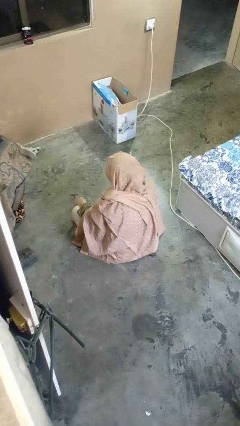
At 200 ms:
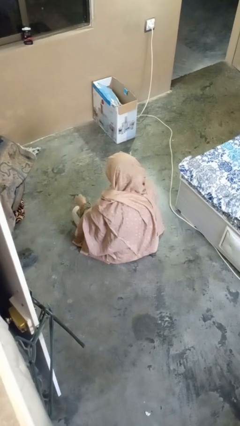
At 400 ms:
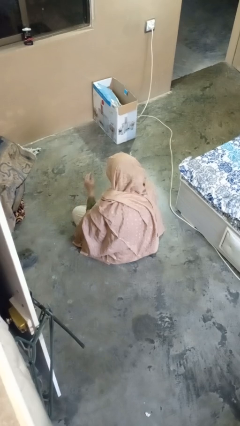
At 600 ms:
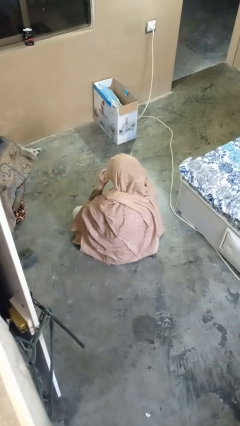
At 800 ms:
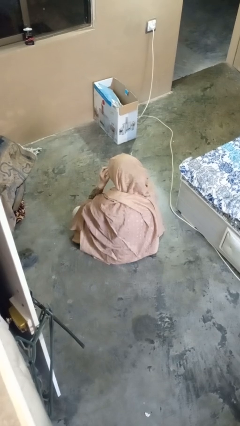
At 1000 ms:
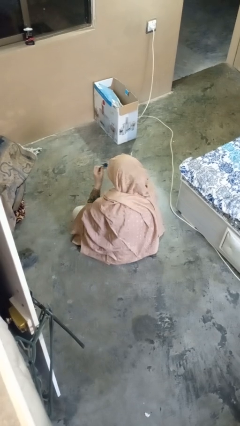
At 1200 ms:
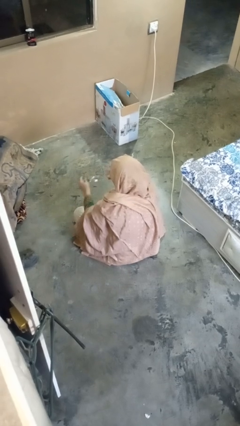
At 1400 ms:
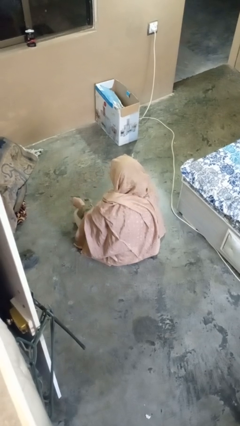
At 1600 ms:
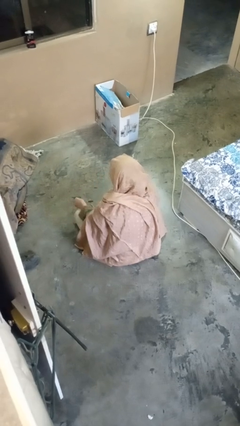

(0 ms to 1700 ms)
person takes off glasses

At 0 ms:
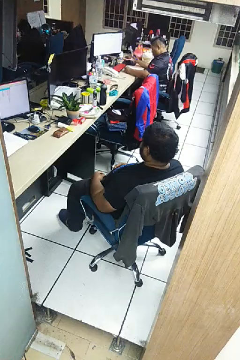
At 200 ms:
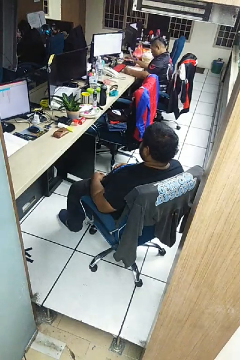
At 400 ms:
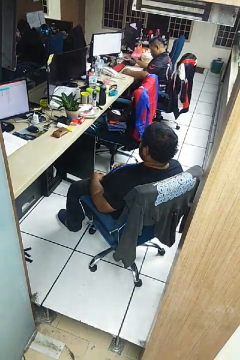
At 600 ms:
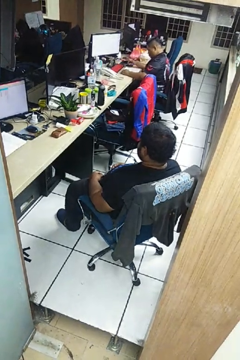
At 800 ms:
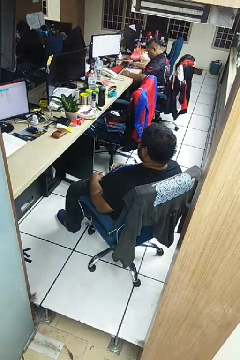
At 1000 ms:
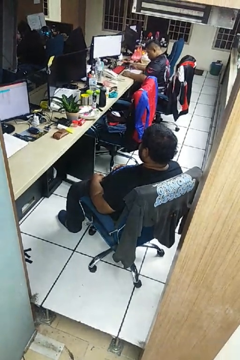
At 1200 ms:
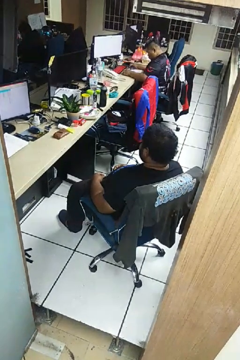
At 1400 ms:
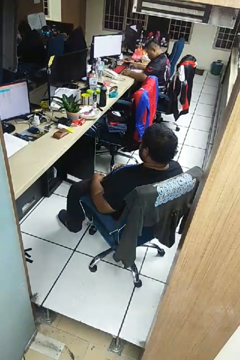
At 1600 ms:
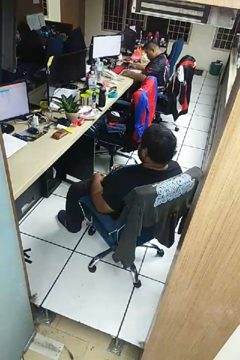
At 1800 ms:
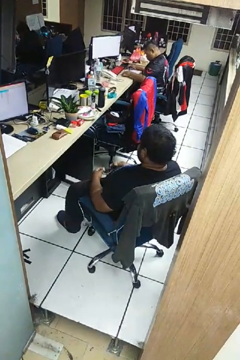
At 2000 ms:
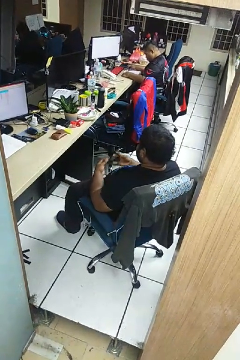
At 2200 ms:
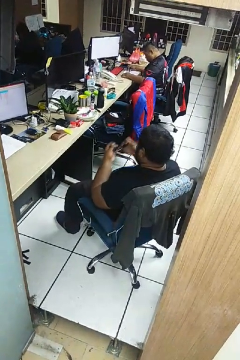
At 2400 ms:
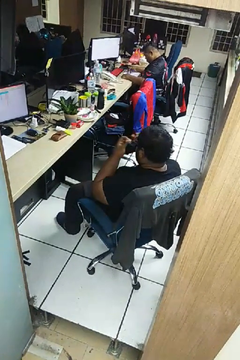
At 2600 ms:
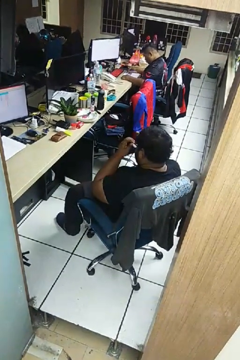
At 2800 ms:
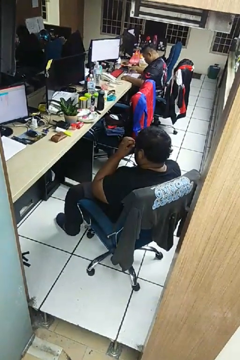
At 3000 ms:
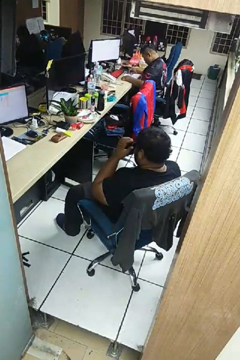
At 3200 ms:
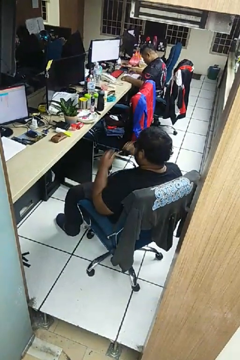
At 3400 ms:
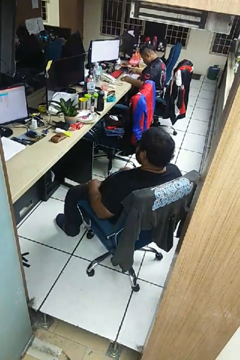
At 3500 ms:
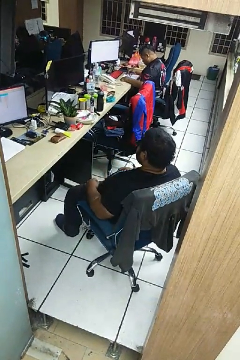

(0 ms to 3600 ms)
person puts on sunglasses

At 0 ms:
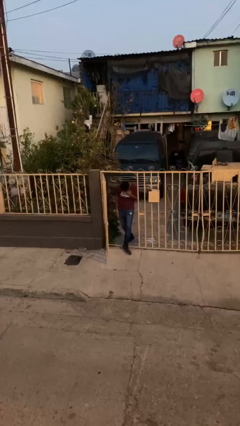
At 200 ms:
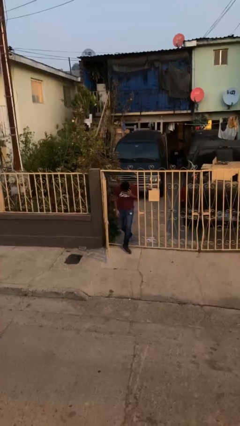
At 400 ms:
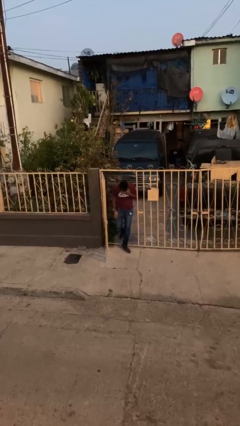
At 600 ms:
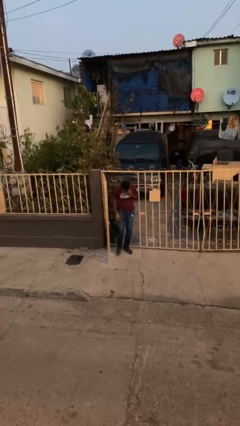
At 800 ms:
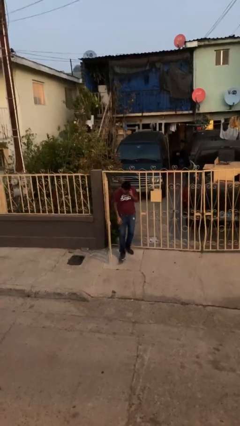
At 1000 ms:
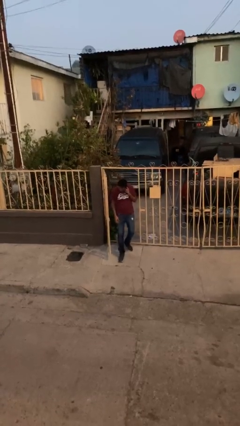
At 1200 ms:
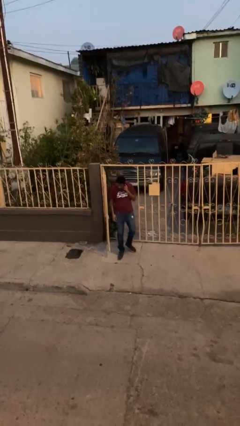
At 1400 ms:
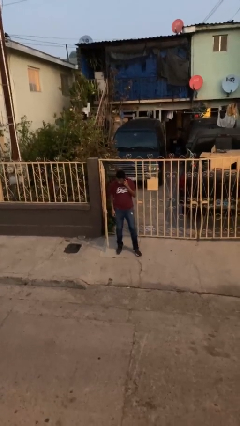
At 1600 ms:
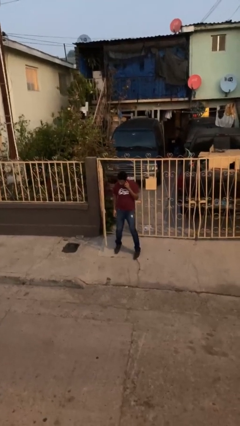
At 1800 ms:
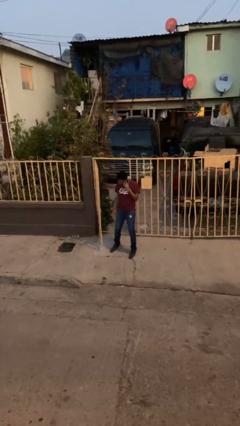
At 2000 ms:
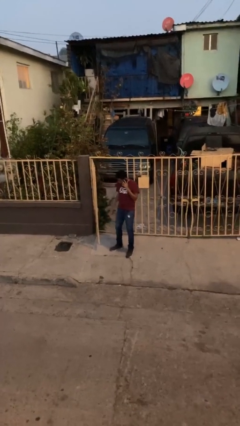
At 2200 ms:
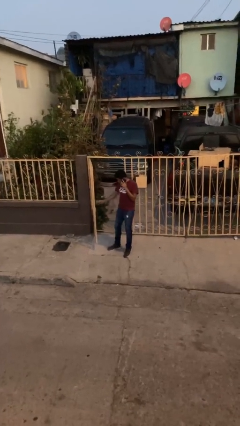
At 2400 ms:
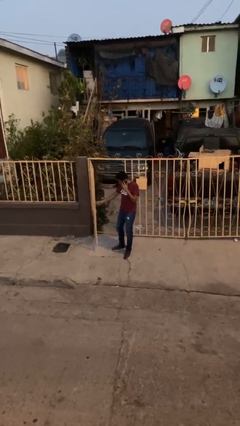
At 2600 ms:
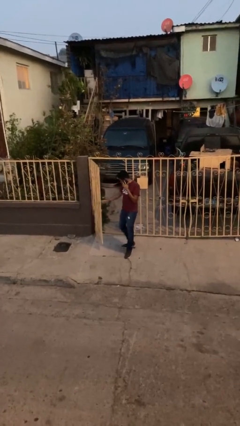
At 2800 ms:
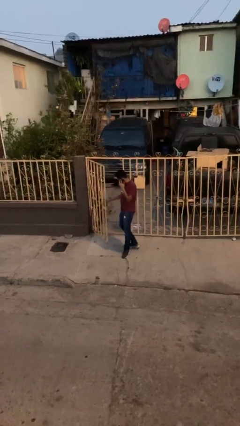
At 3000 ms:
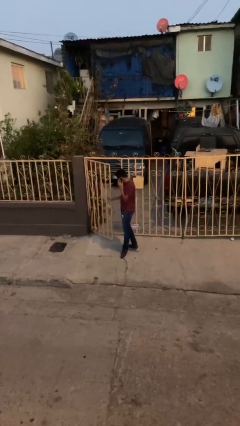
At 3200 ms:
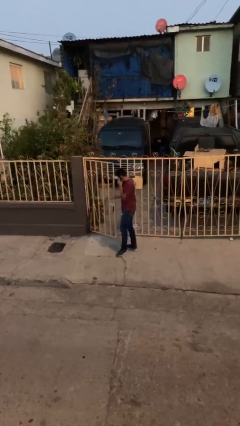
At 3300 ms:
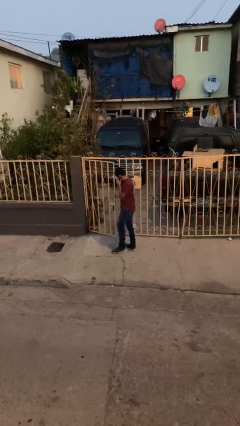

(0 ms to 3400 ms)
person enters scene through structure

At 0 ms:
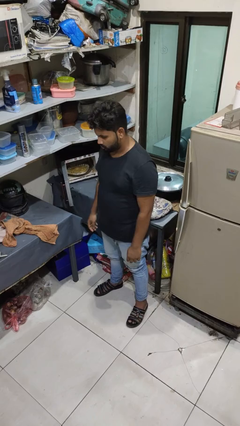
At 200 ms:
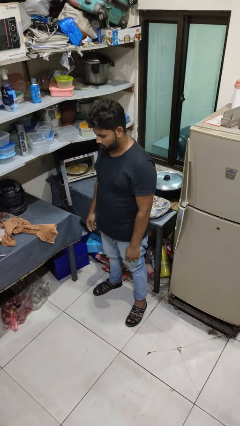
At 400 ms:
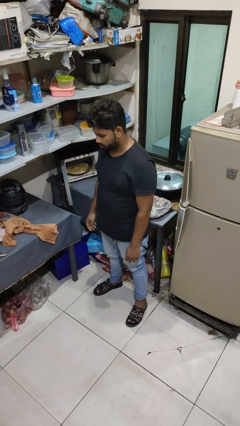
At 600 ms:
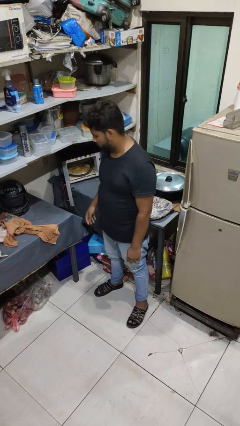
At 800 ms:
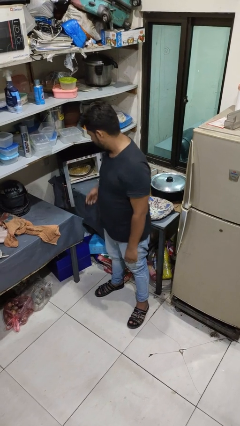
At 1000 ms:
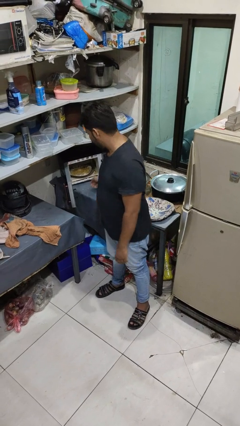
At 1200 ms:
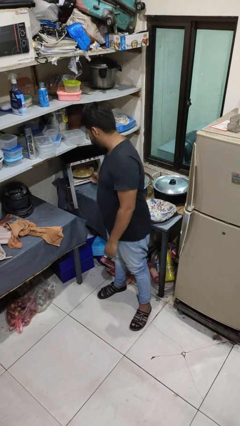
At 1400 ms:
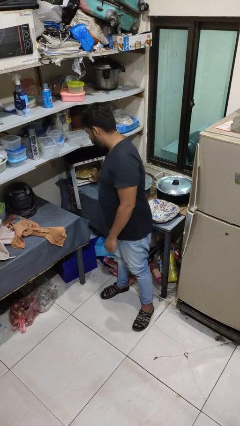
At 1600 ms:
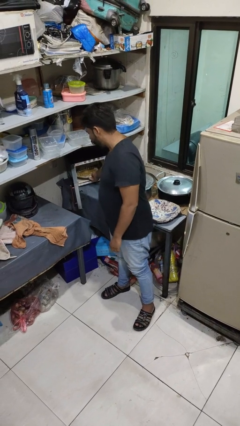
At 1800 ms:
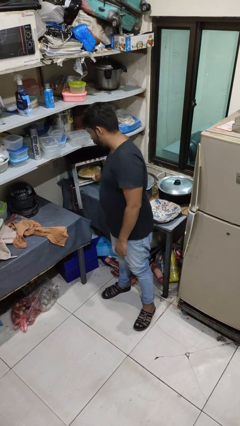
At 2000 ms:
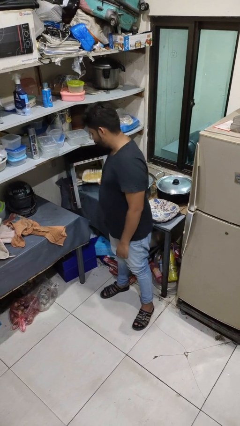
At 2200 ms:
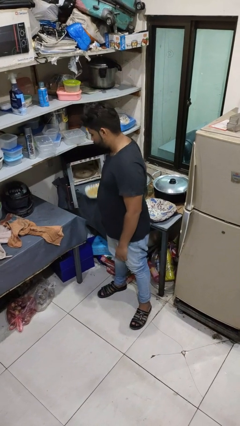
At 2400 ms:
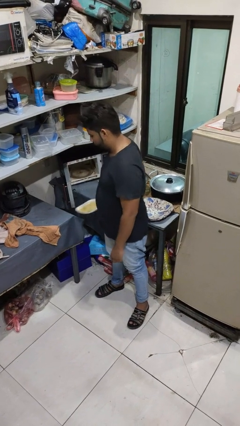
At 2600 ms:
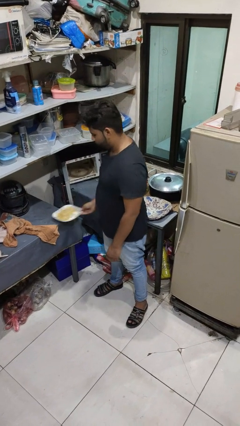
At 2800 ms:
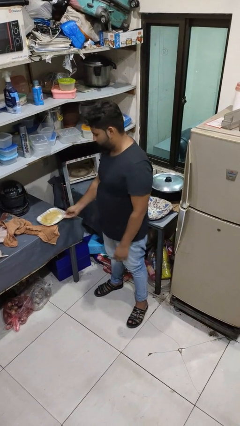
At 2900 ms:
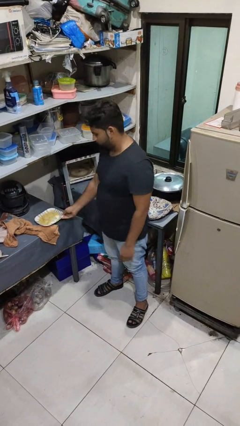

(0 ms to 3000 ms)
person takes object from microwave

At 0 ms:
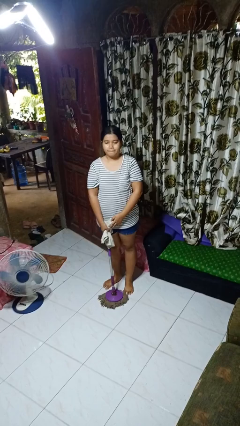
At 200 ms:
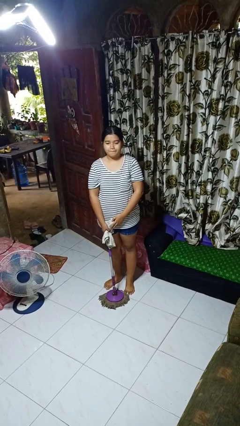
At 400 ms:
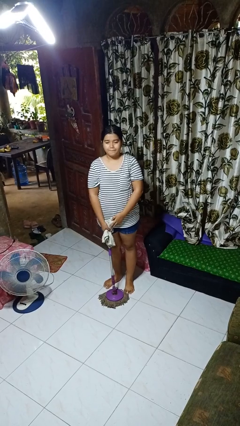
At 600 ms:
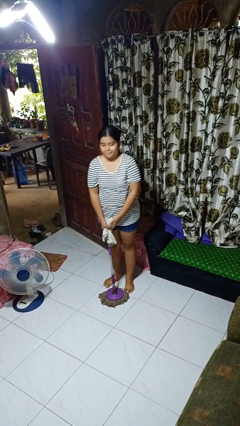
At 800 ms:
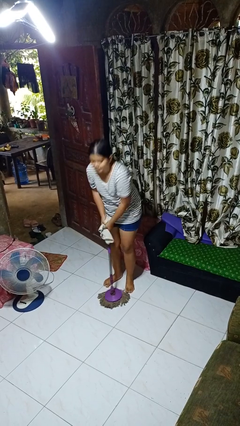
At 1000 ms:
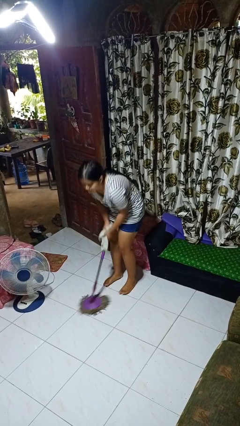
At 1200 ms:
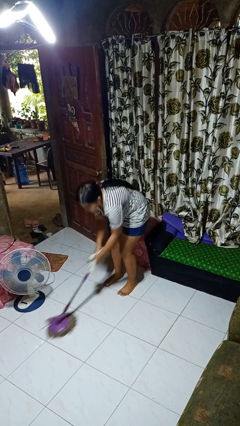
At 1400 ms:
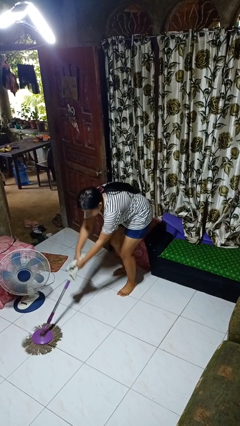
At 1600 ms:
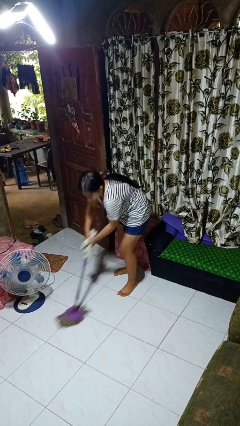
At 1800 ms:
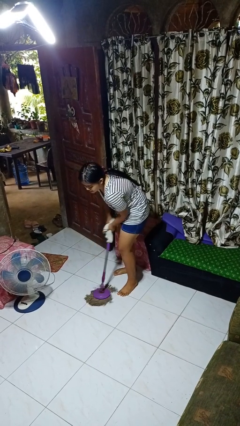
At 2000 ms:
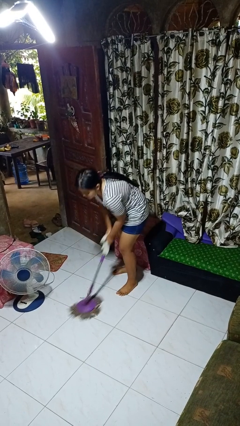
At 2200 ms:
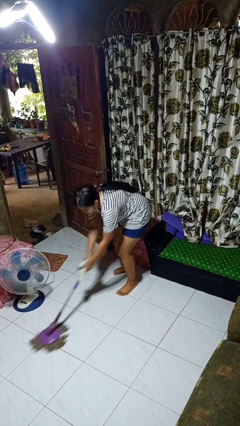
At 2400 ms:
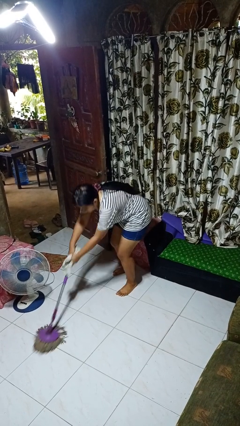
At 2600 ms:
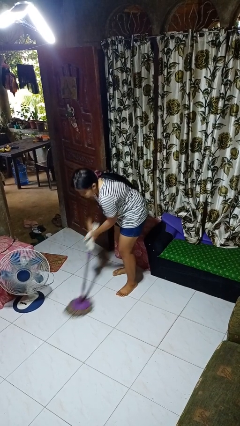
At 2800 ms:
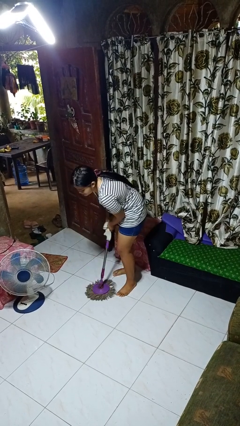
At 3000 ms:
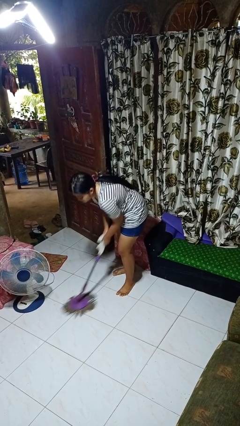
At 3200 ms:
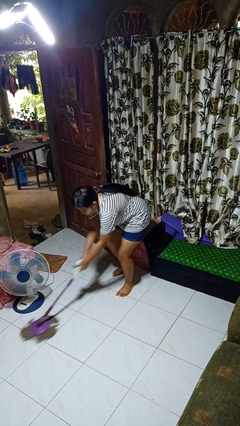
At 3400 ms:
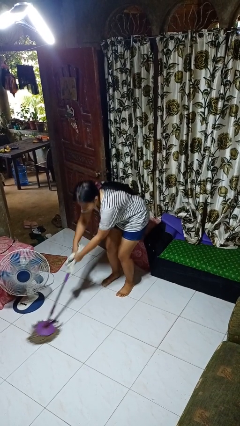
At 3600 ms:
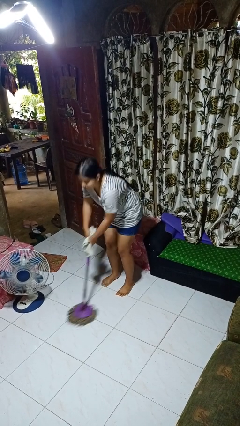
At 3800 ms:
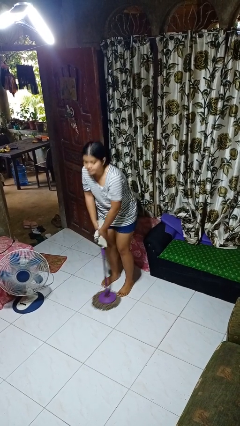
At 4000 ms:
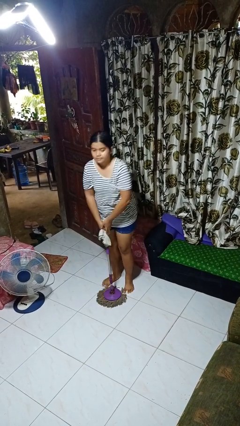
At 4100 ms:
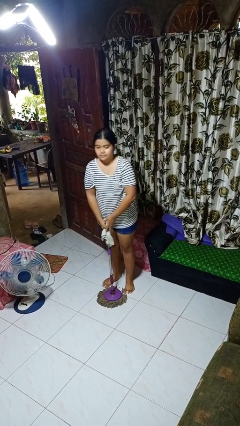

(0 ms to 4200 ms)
person mops

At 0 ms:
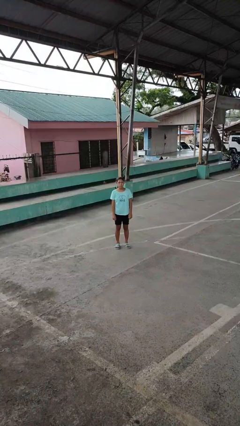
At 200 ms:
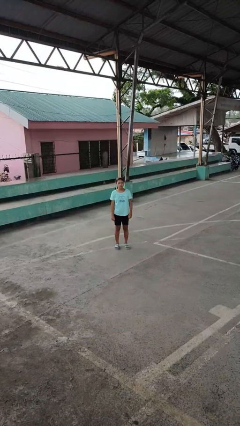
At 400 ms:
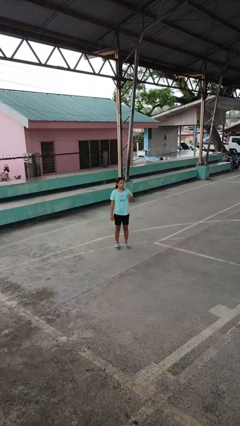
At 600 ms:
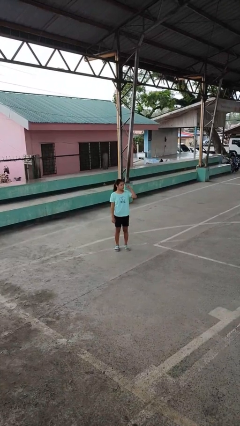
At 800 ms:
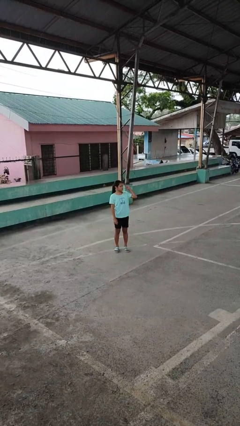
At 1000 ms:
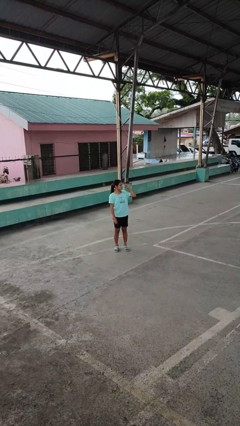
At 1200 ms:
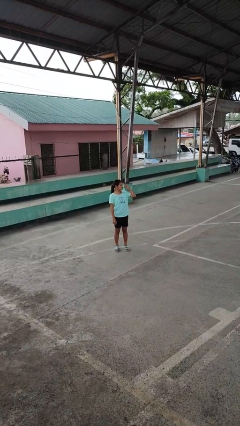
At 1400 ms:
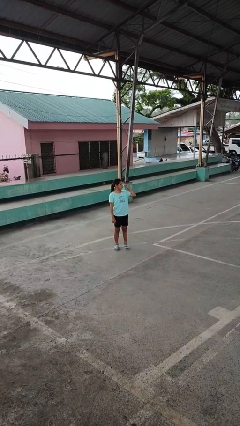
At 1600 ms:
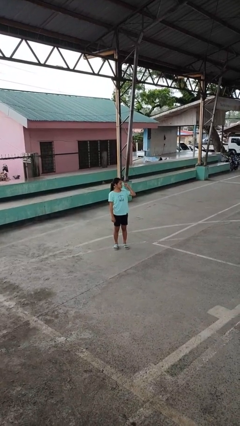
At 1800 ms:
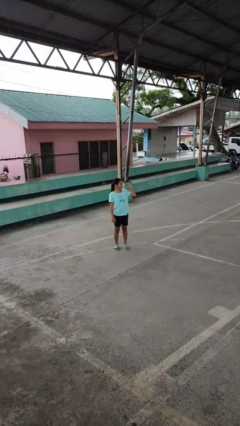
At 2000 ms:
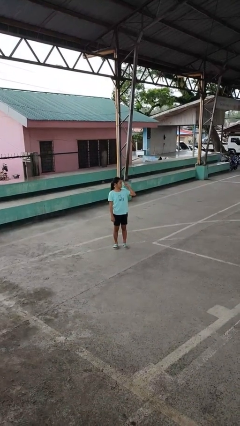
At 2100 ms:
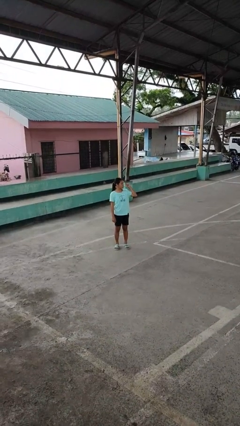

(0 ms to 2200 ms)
person gestures behind me

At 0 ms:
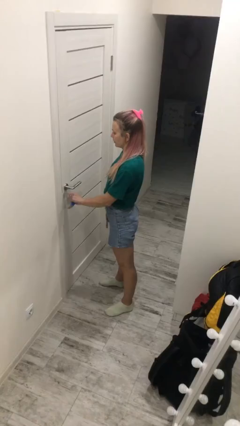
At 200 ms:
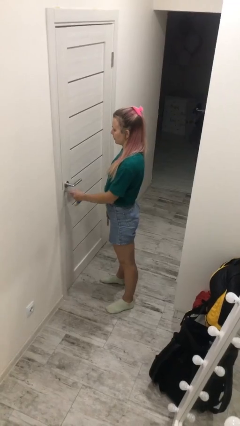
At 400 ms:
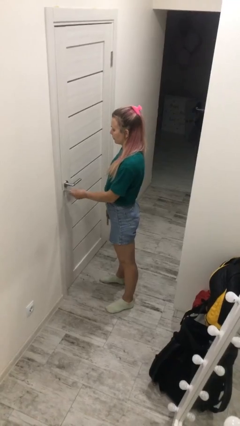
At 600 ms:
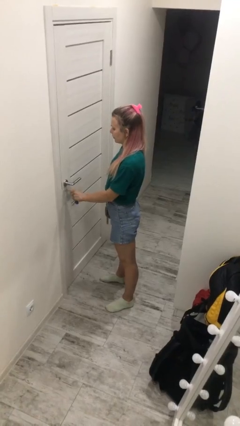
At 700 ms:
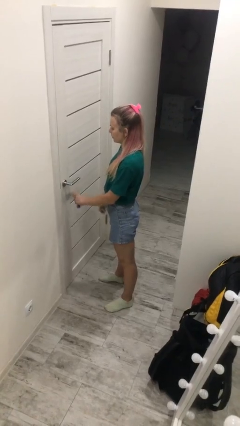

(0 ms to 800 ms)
person unlocks door with keys
